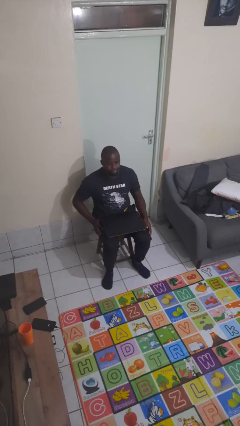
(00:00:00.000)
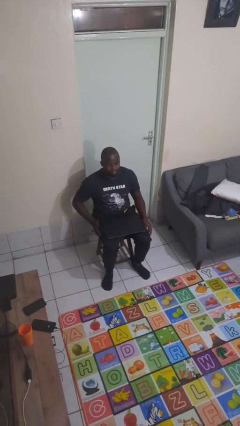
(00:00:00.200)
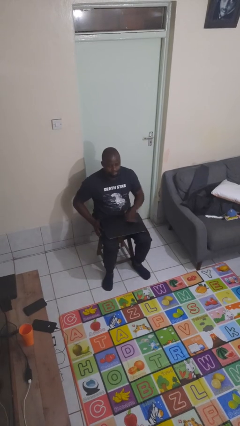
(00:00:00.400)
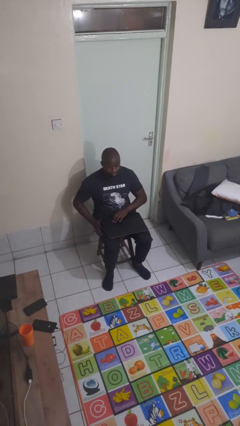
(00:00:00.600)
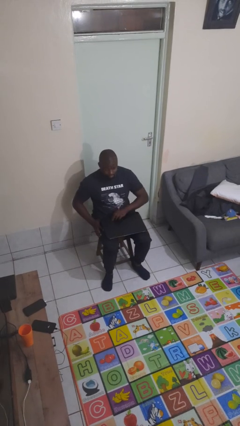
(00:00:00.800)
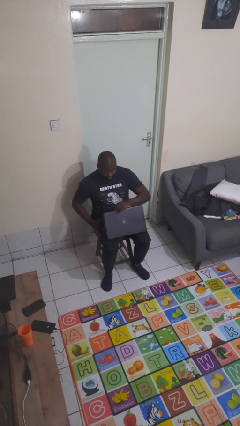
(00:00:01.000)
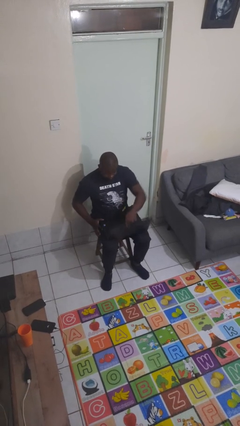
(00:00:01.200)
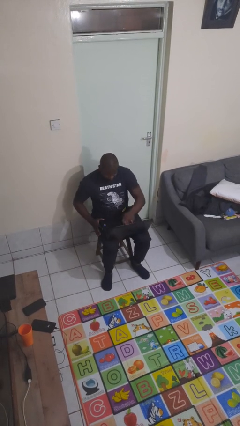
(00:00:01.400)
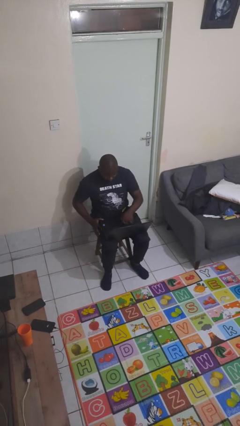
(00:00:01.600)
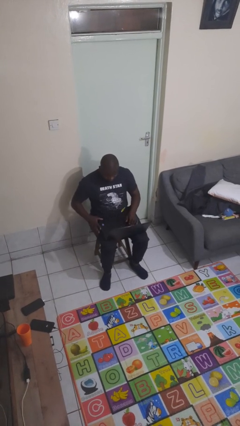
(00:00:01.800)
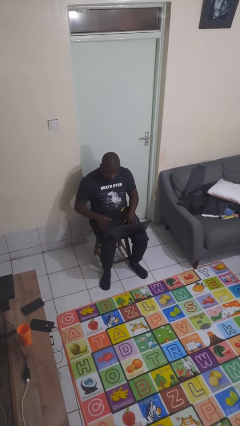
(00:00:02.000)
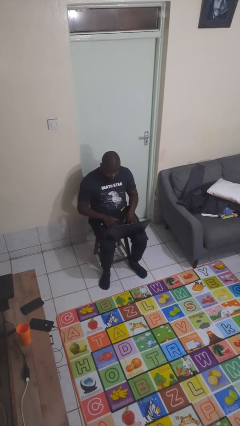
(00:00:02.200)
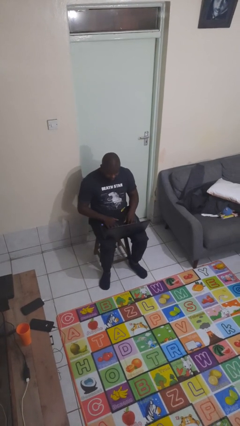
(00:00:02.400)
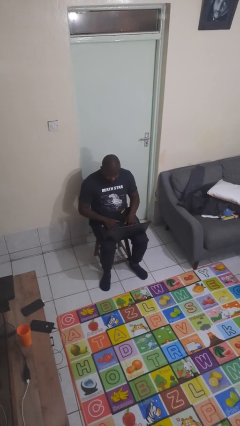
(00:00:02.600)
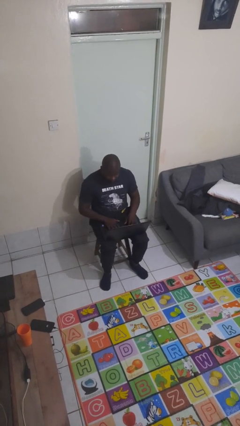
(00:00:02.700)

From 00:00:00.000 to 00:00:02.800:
person opens laptop

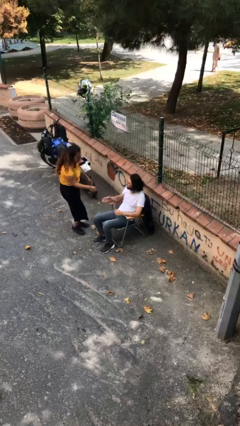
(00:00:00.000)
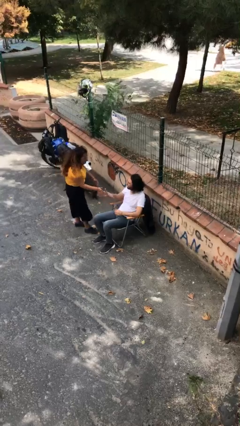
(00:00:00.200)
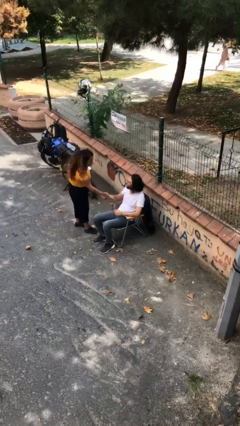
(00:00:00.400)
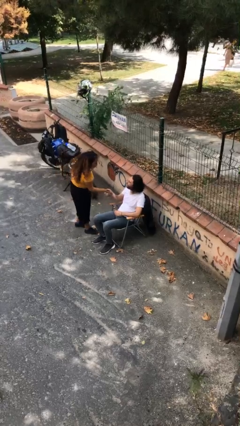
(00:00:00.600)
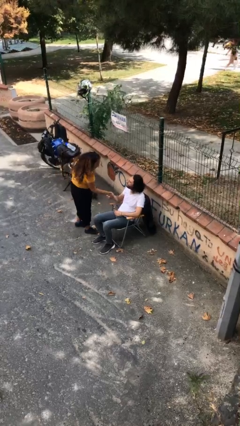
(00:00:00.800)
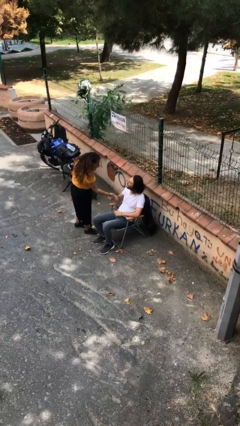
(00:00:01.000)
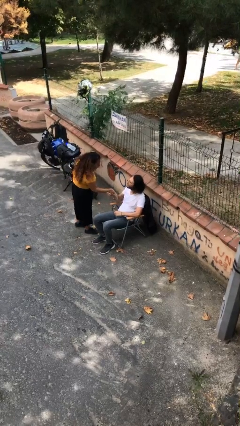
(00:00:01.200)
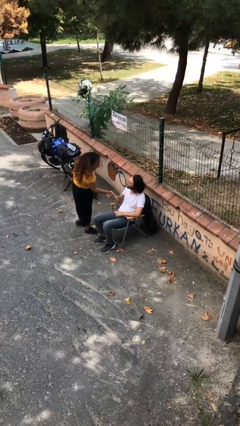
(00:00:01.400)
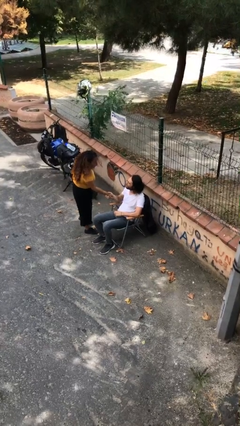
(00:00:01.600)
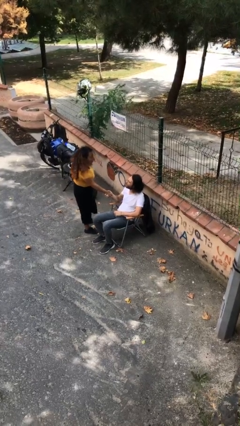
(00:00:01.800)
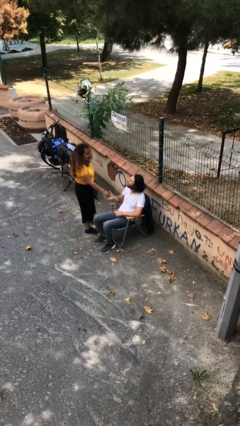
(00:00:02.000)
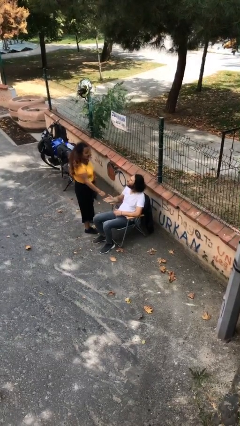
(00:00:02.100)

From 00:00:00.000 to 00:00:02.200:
person shakes hand

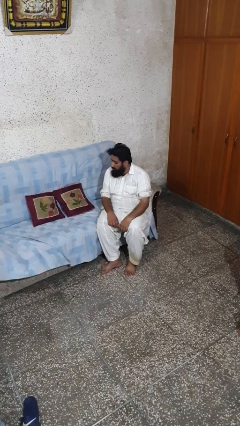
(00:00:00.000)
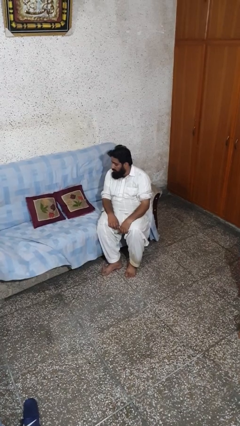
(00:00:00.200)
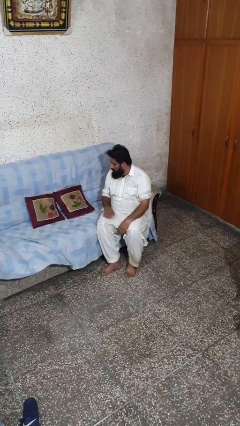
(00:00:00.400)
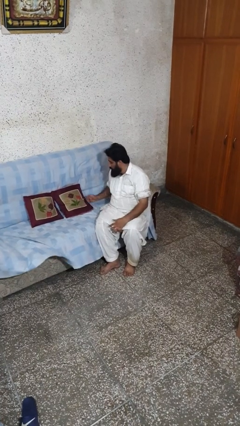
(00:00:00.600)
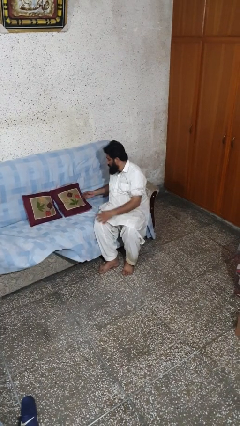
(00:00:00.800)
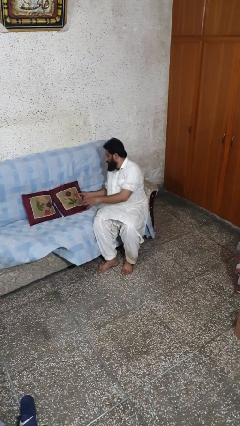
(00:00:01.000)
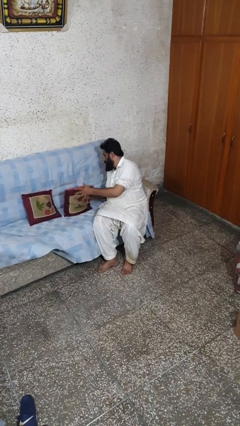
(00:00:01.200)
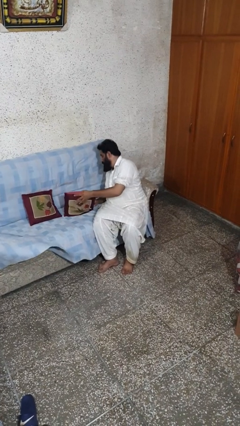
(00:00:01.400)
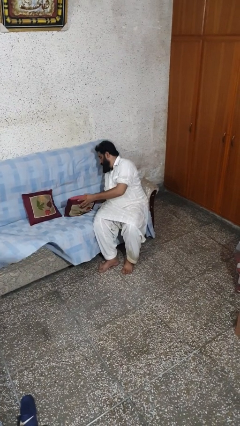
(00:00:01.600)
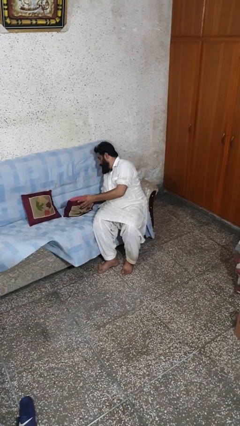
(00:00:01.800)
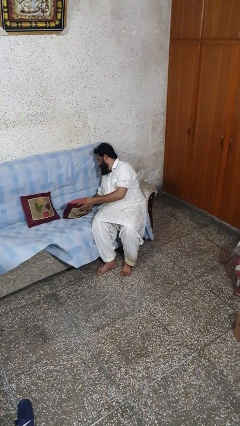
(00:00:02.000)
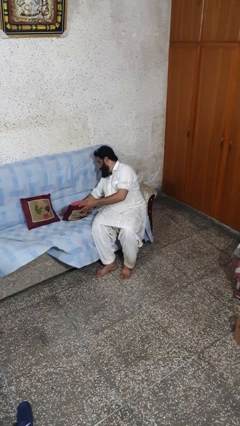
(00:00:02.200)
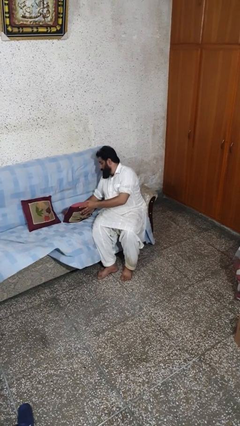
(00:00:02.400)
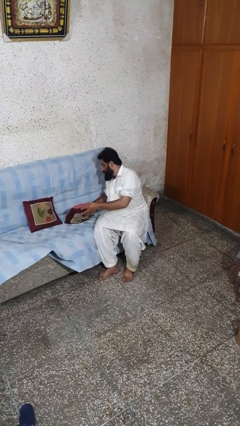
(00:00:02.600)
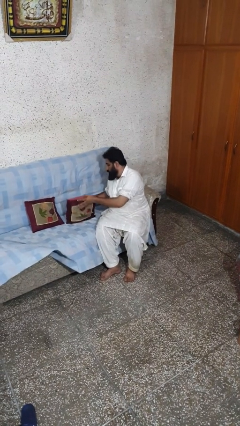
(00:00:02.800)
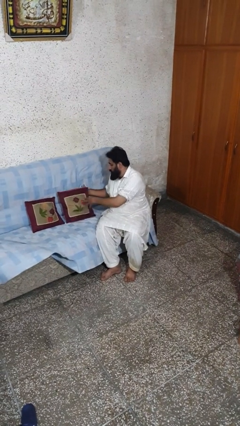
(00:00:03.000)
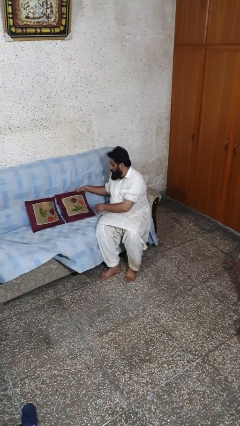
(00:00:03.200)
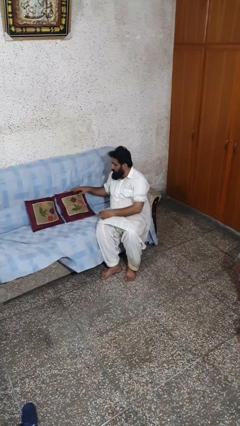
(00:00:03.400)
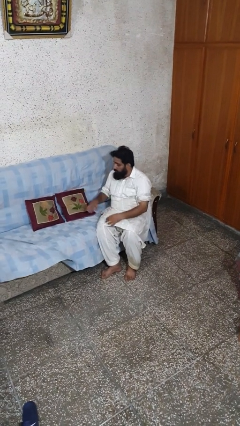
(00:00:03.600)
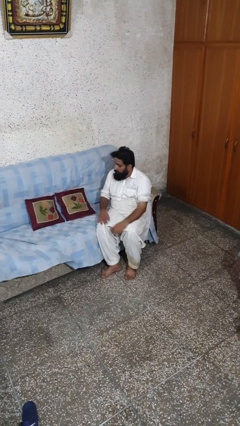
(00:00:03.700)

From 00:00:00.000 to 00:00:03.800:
person searches in couch

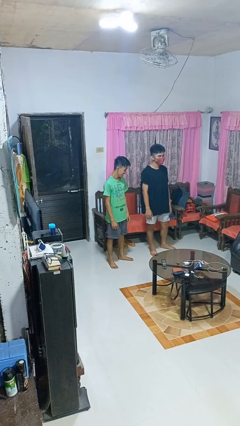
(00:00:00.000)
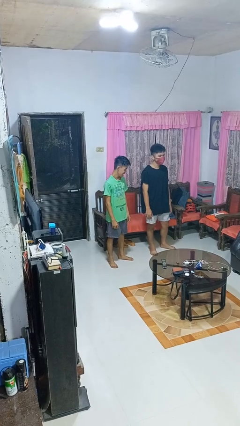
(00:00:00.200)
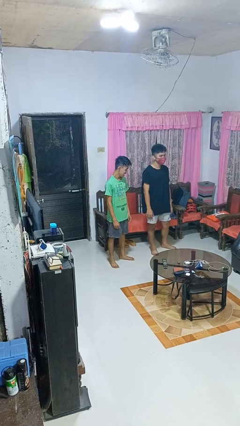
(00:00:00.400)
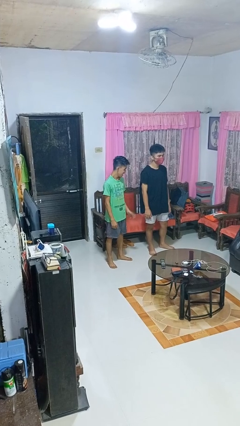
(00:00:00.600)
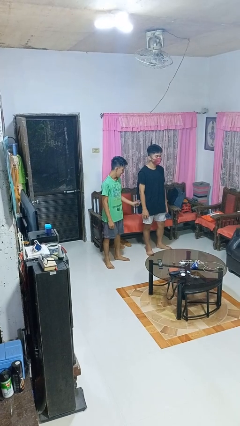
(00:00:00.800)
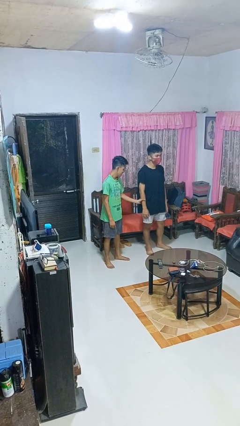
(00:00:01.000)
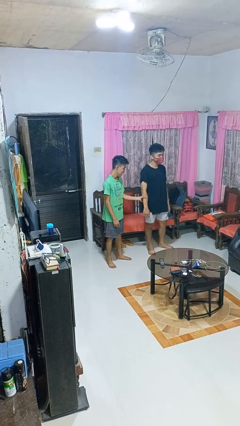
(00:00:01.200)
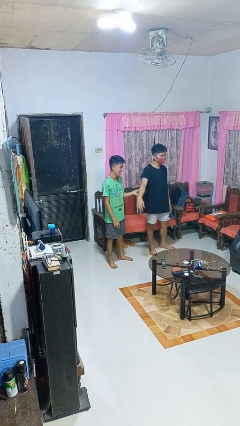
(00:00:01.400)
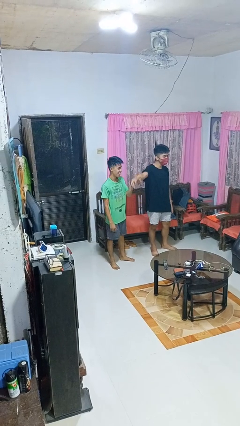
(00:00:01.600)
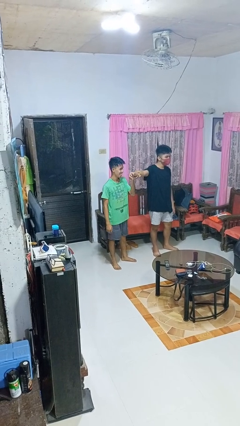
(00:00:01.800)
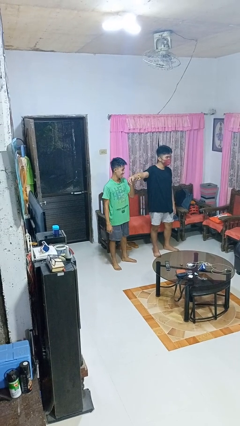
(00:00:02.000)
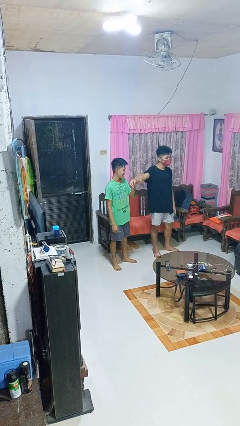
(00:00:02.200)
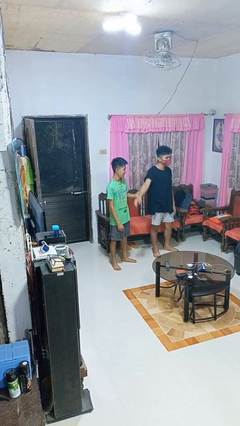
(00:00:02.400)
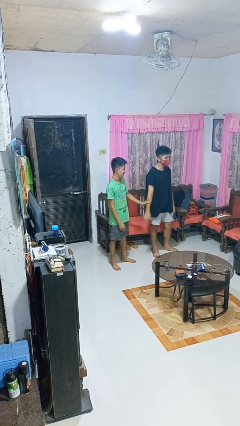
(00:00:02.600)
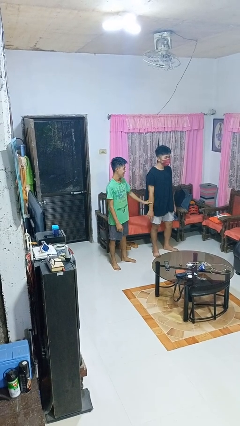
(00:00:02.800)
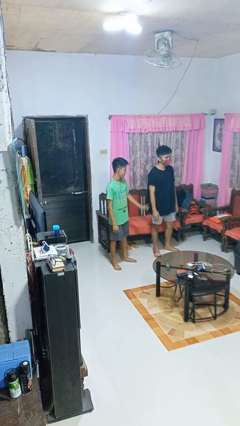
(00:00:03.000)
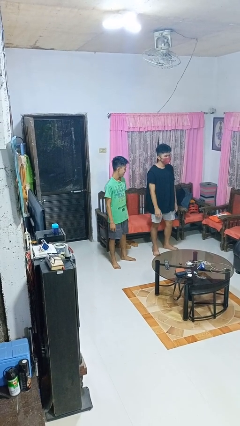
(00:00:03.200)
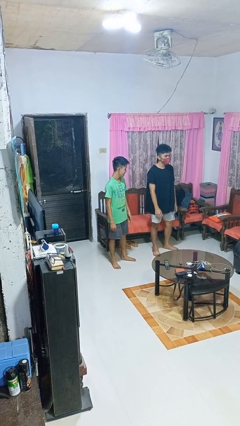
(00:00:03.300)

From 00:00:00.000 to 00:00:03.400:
person grabs person by forearm

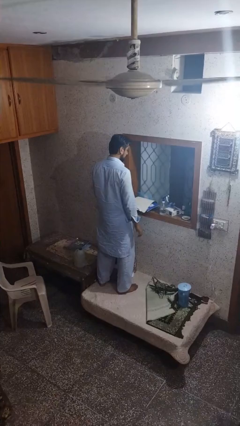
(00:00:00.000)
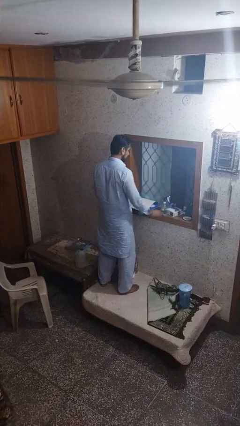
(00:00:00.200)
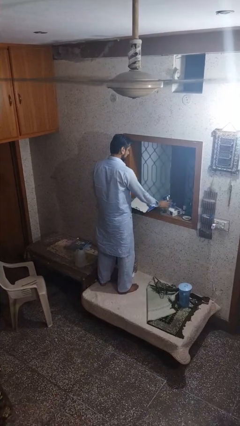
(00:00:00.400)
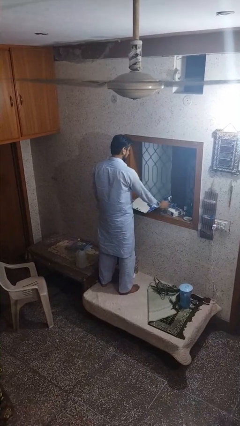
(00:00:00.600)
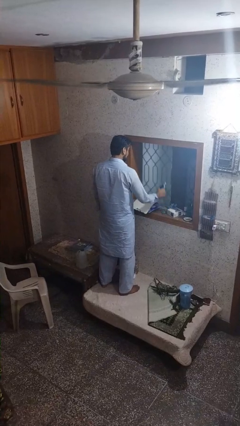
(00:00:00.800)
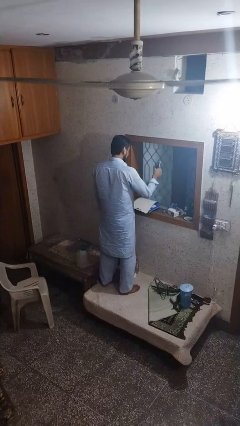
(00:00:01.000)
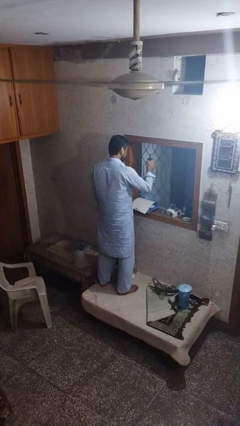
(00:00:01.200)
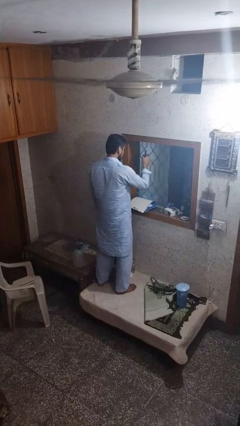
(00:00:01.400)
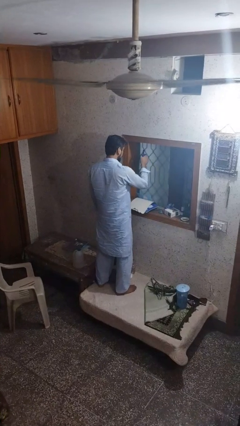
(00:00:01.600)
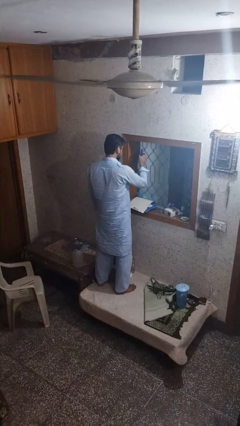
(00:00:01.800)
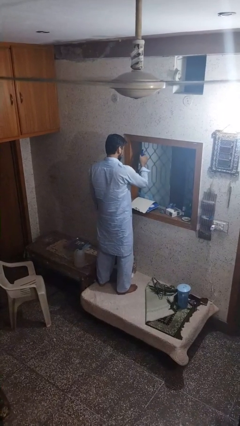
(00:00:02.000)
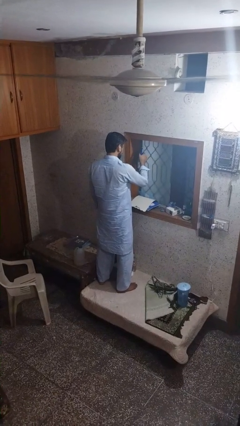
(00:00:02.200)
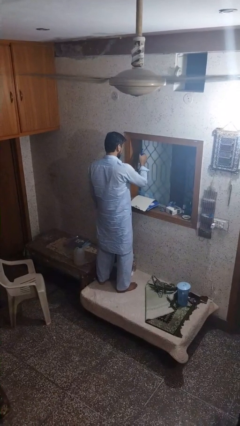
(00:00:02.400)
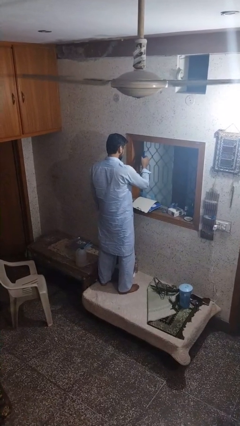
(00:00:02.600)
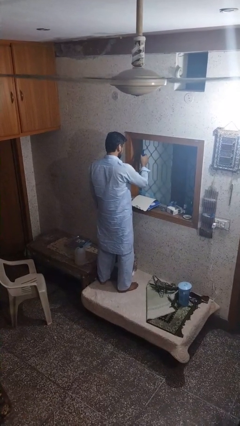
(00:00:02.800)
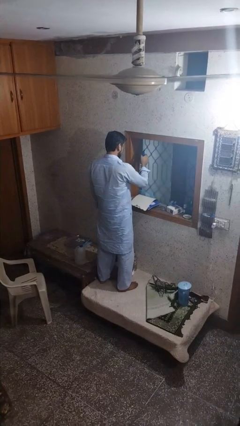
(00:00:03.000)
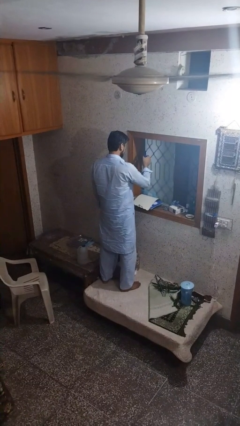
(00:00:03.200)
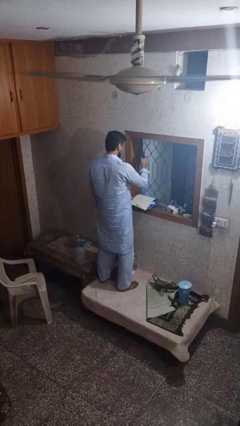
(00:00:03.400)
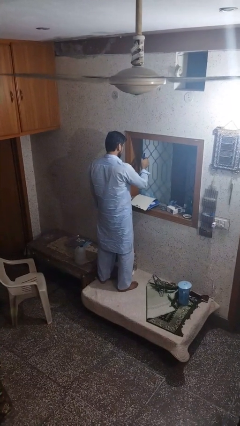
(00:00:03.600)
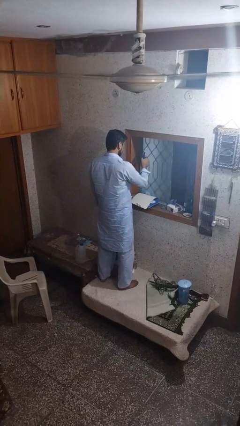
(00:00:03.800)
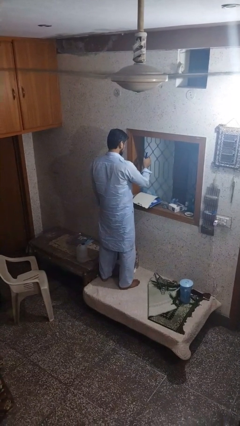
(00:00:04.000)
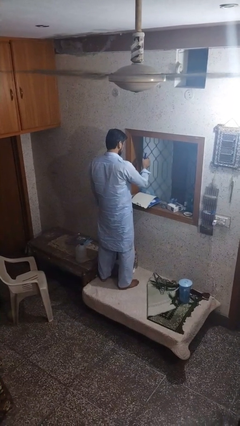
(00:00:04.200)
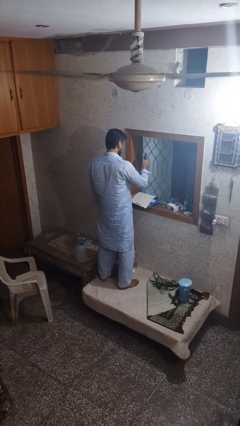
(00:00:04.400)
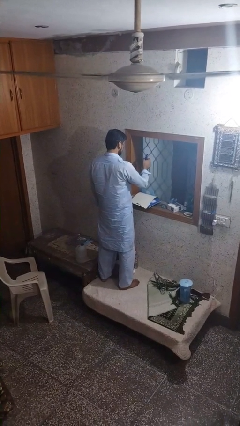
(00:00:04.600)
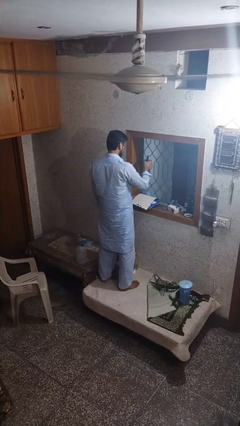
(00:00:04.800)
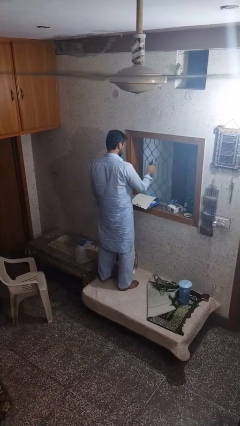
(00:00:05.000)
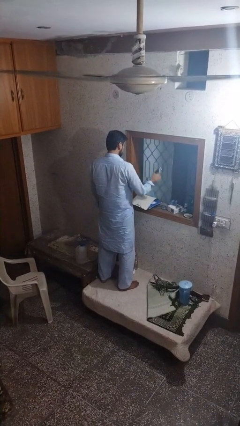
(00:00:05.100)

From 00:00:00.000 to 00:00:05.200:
person sprays from bottle
